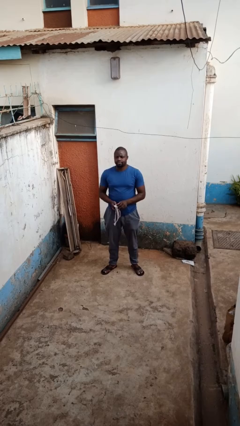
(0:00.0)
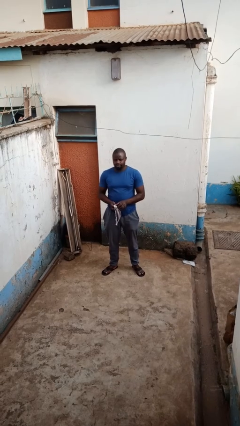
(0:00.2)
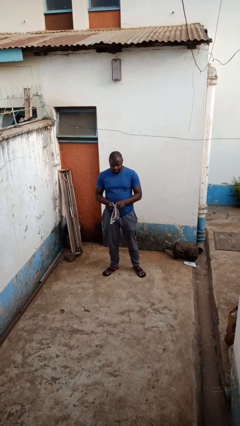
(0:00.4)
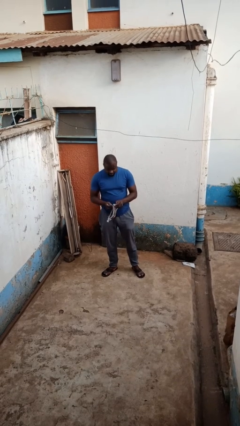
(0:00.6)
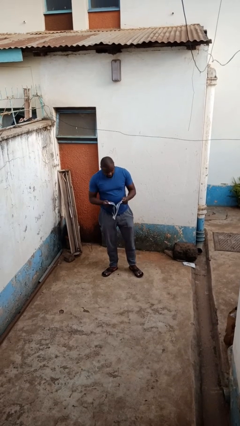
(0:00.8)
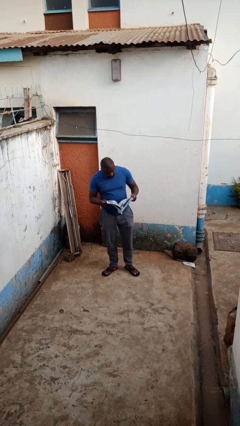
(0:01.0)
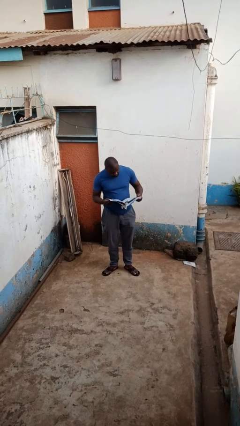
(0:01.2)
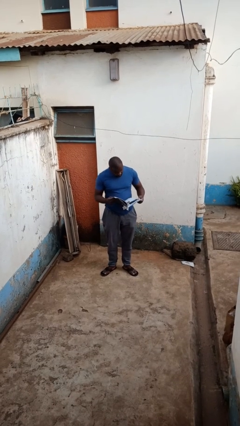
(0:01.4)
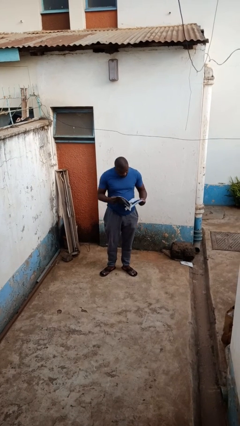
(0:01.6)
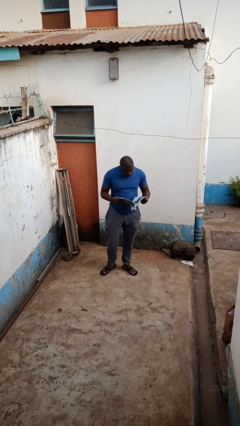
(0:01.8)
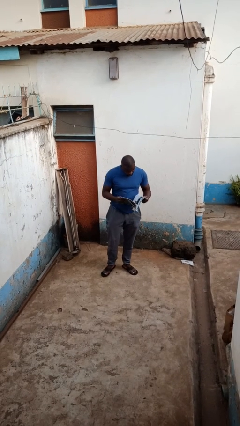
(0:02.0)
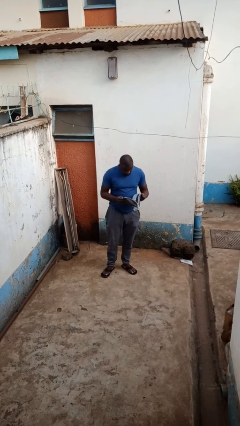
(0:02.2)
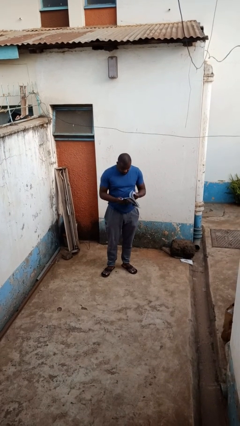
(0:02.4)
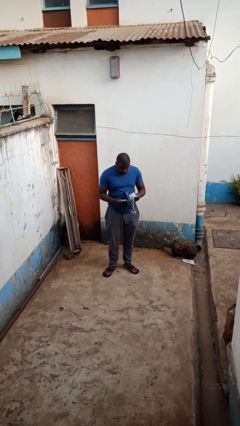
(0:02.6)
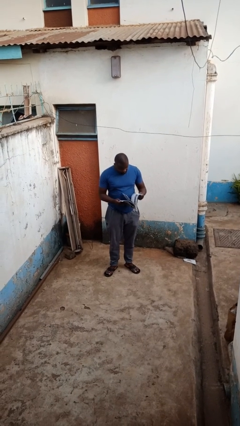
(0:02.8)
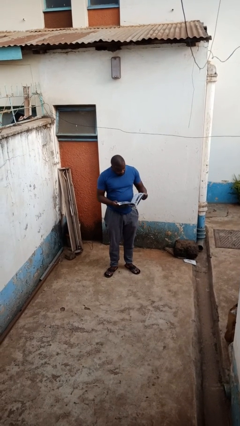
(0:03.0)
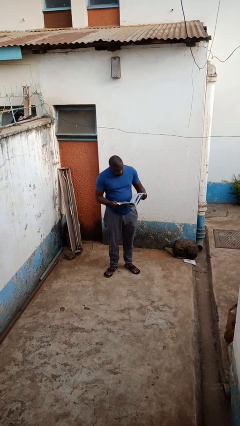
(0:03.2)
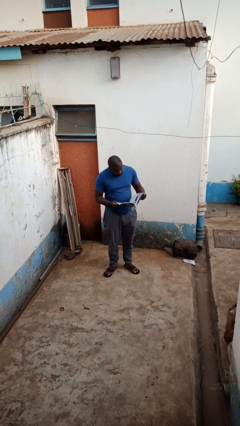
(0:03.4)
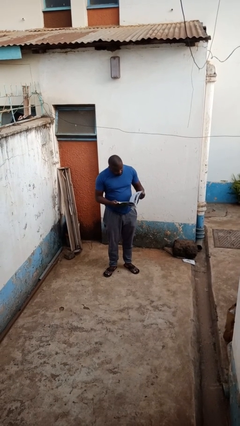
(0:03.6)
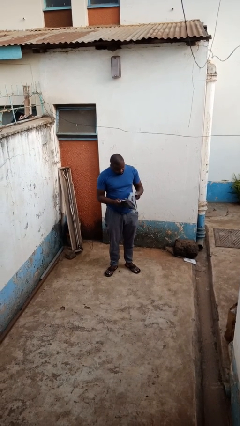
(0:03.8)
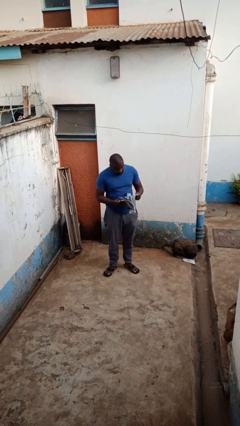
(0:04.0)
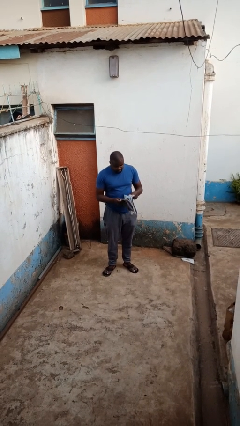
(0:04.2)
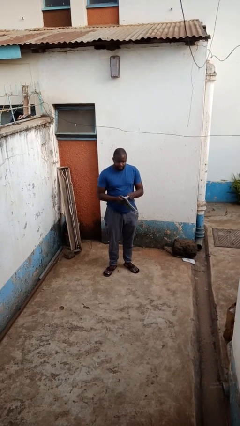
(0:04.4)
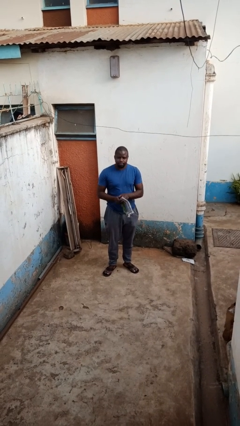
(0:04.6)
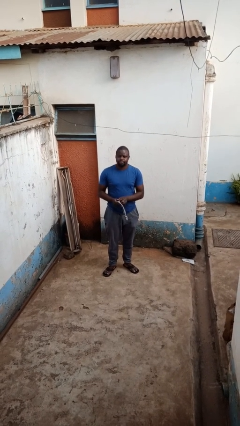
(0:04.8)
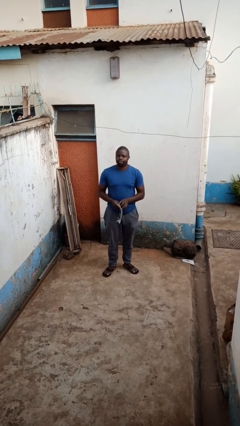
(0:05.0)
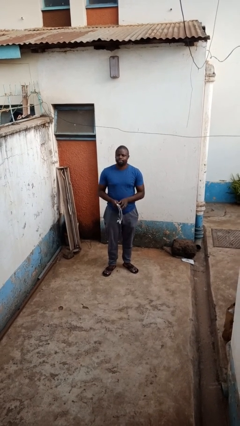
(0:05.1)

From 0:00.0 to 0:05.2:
person reads magazine

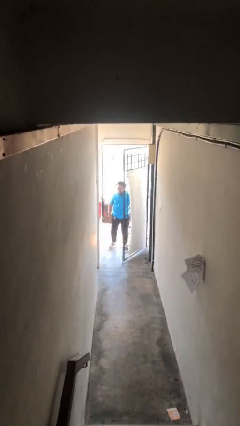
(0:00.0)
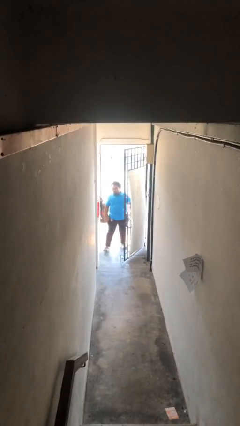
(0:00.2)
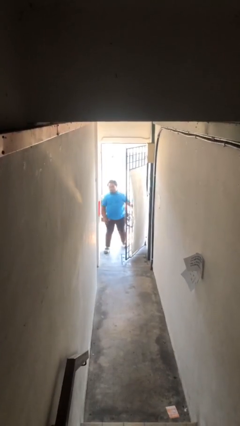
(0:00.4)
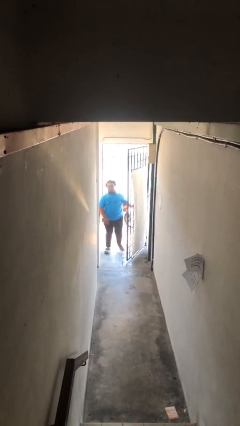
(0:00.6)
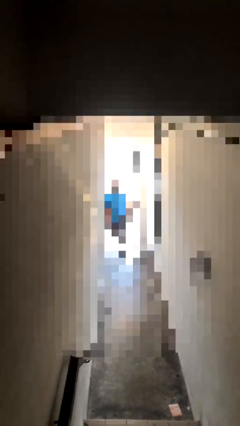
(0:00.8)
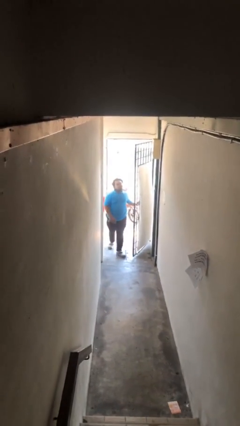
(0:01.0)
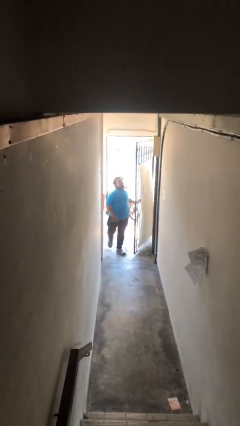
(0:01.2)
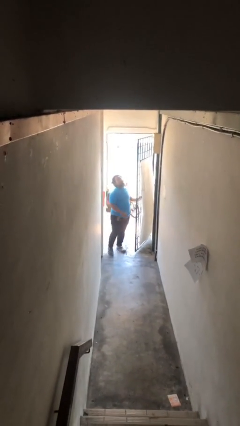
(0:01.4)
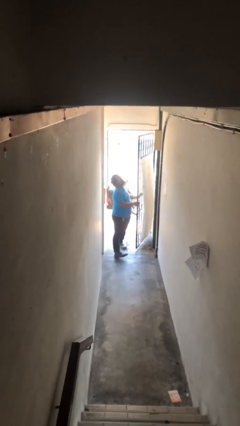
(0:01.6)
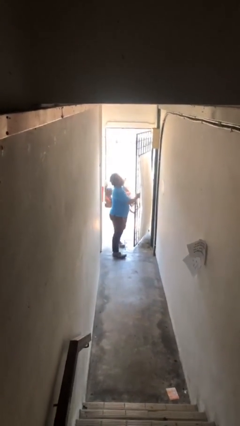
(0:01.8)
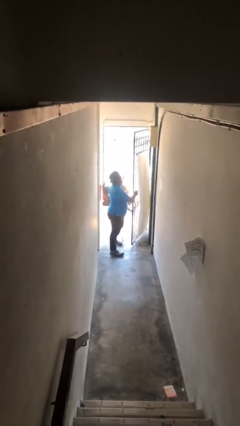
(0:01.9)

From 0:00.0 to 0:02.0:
person enters scene through structure

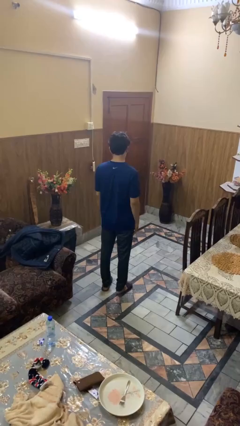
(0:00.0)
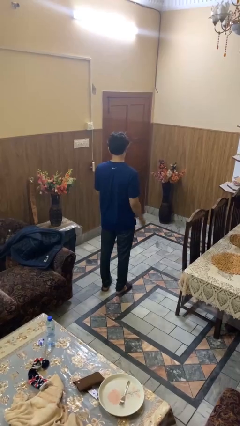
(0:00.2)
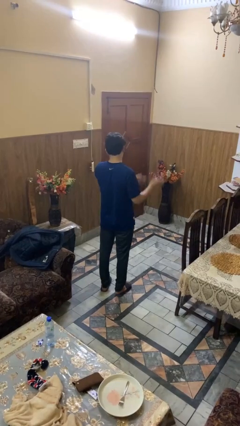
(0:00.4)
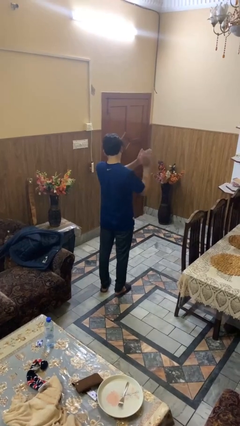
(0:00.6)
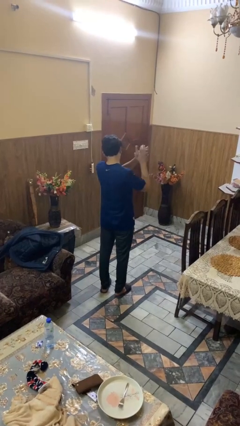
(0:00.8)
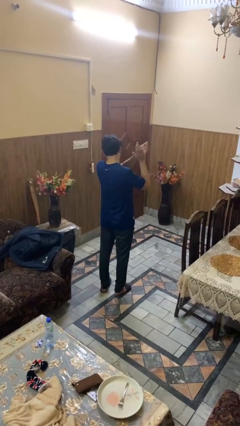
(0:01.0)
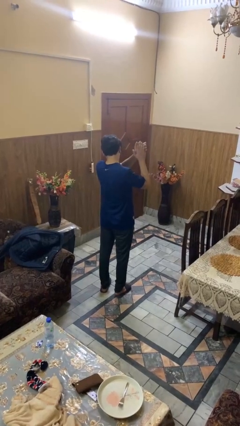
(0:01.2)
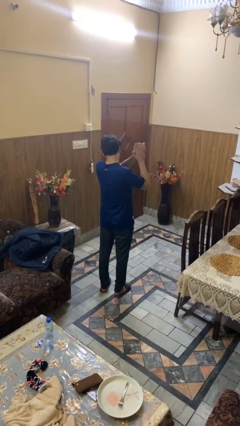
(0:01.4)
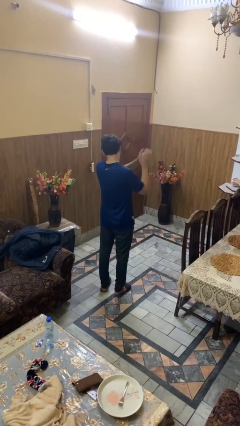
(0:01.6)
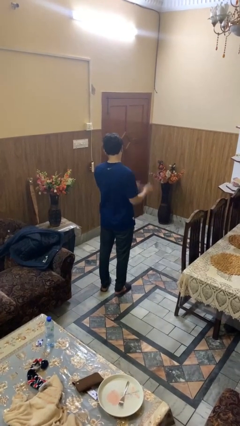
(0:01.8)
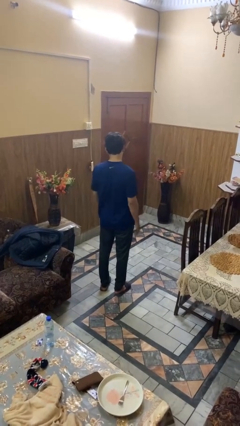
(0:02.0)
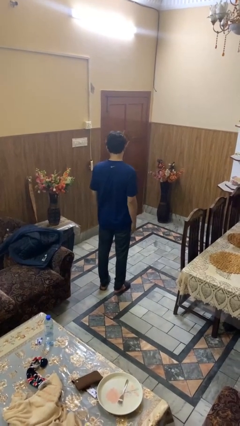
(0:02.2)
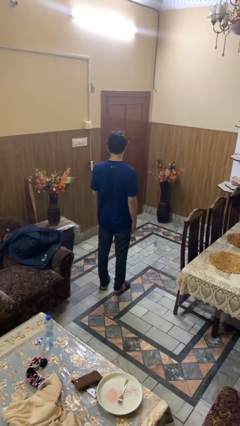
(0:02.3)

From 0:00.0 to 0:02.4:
person claps hands

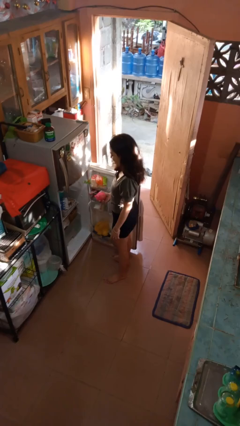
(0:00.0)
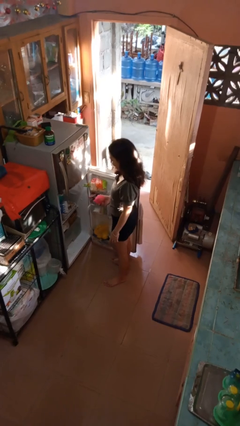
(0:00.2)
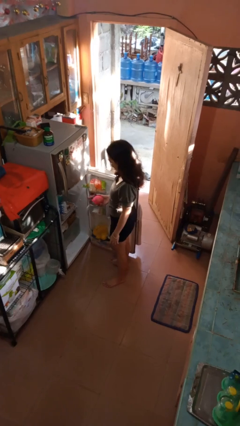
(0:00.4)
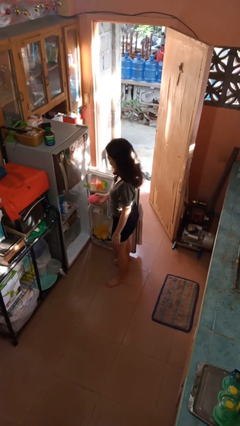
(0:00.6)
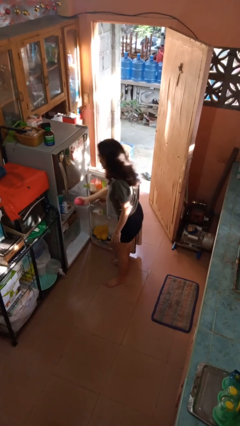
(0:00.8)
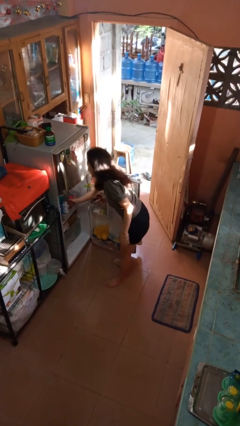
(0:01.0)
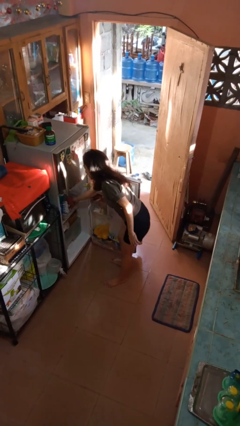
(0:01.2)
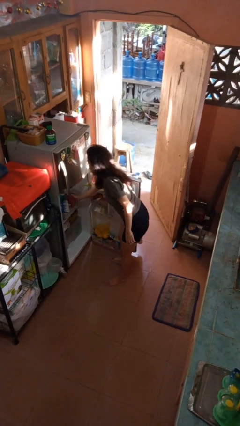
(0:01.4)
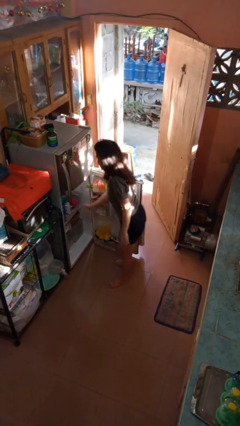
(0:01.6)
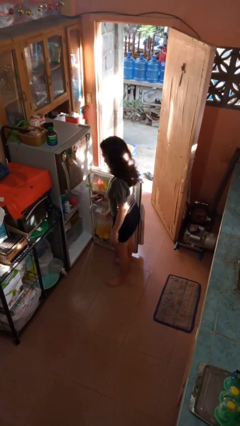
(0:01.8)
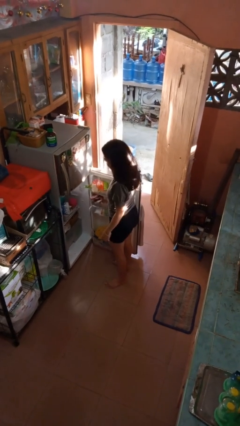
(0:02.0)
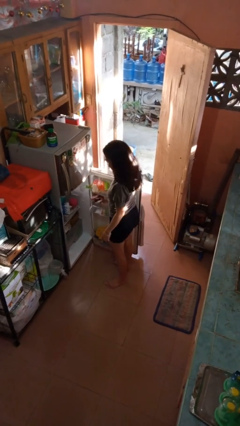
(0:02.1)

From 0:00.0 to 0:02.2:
person puts object into refrigerator

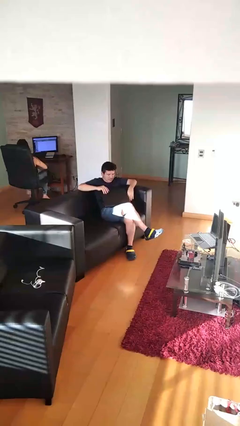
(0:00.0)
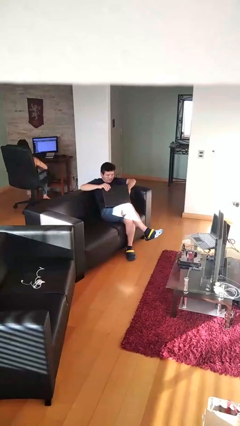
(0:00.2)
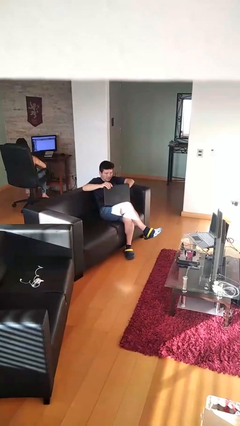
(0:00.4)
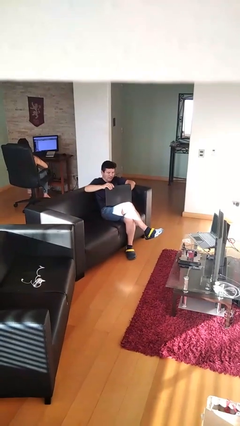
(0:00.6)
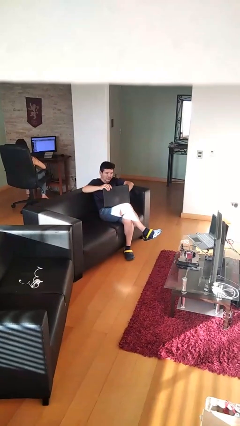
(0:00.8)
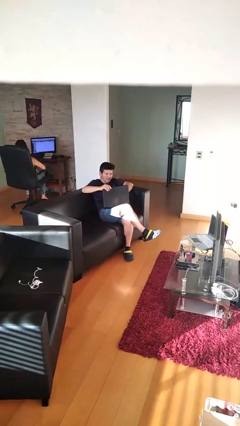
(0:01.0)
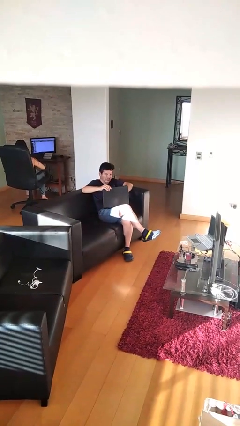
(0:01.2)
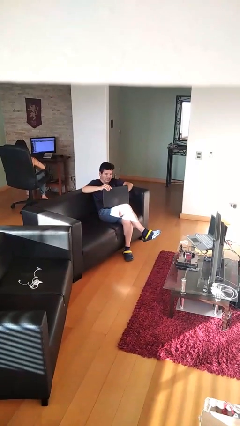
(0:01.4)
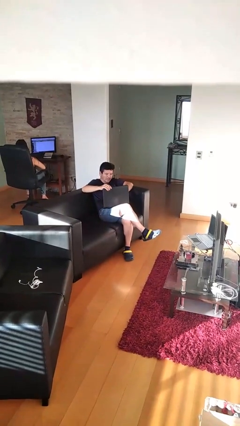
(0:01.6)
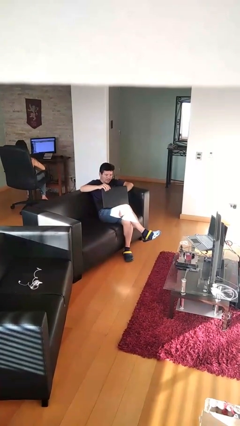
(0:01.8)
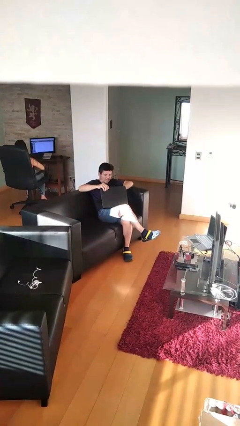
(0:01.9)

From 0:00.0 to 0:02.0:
person interacts with laptop

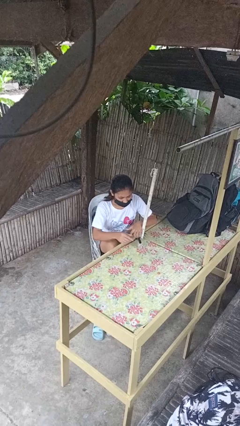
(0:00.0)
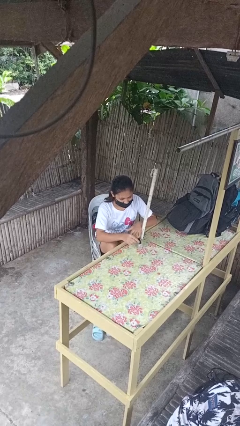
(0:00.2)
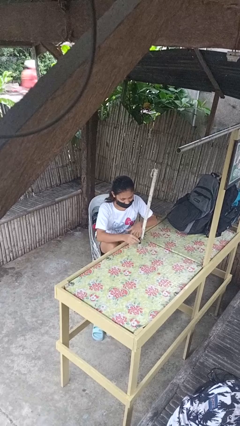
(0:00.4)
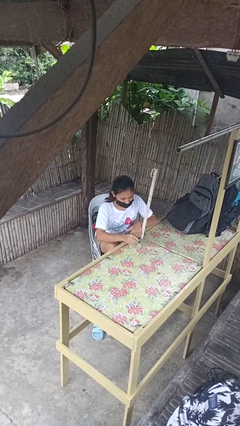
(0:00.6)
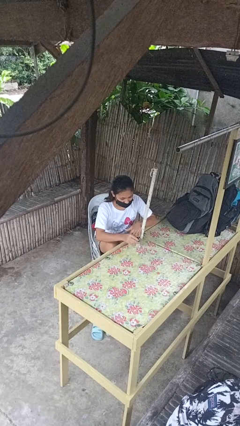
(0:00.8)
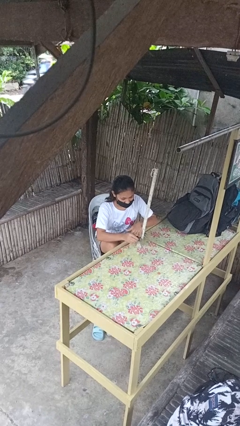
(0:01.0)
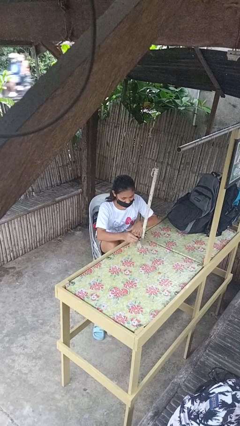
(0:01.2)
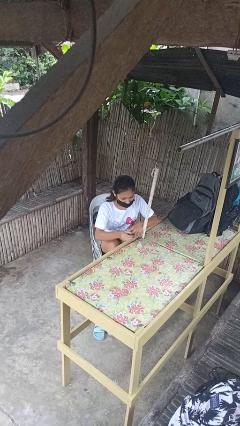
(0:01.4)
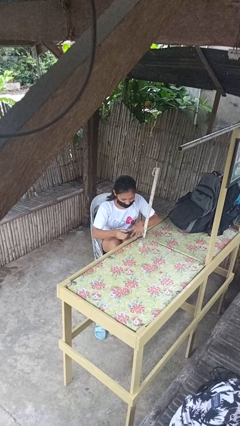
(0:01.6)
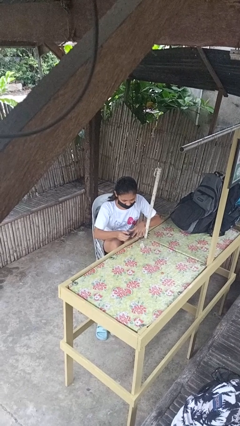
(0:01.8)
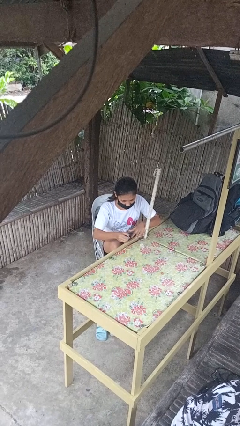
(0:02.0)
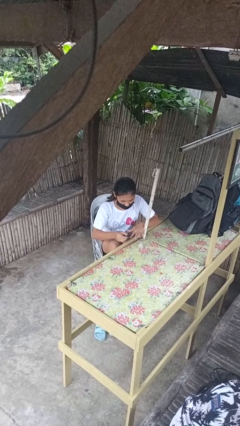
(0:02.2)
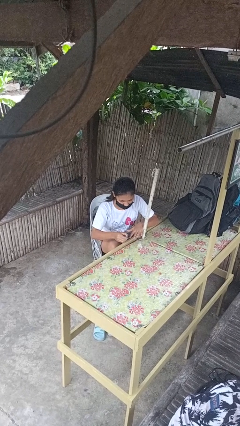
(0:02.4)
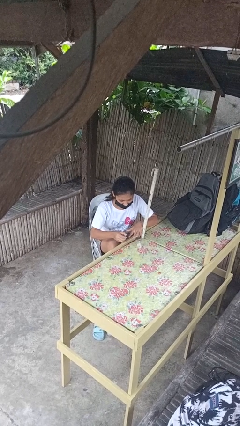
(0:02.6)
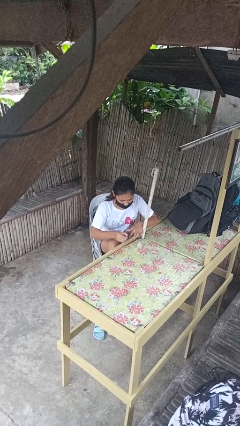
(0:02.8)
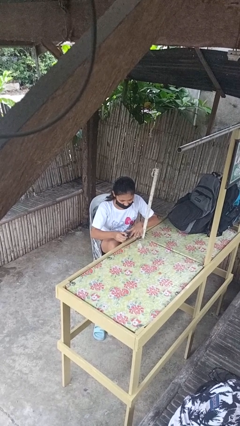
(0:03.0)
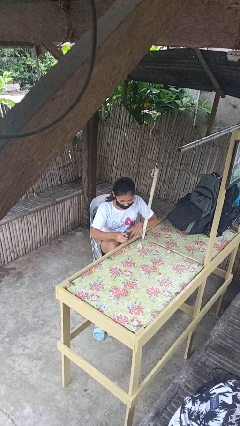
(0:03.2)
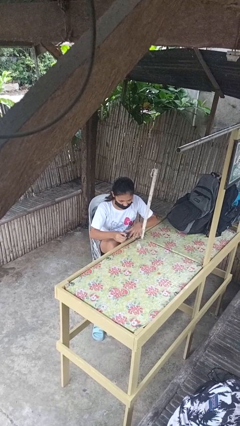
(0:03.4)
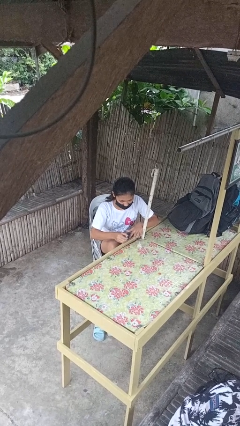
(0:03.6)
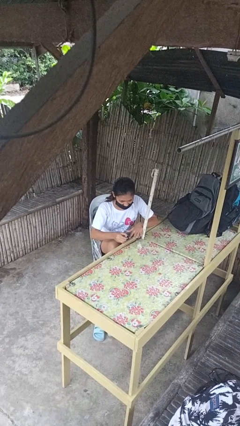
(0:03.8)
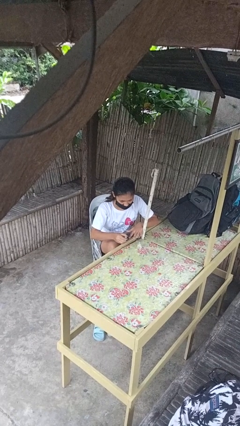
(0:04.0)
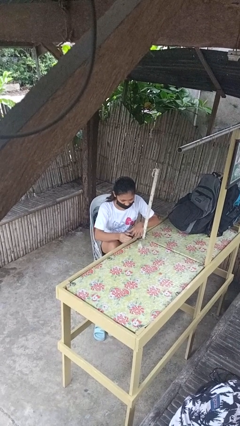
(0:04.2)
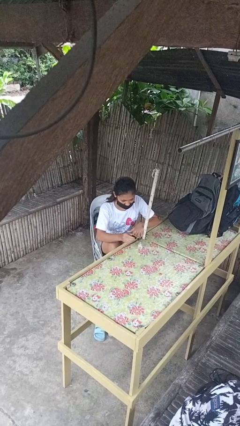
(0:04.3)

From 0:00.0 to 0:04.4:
person paints fingernails
